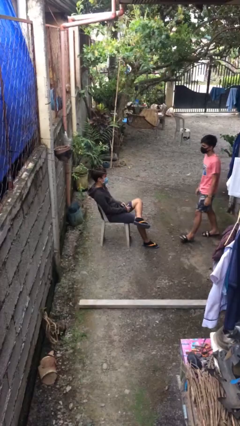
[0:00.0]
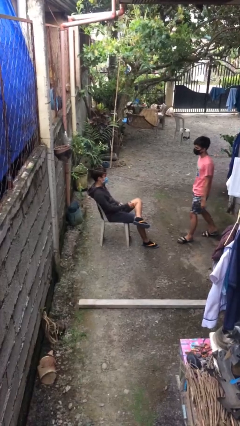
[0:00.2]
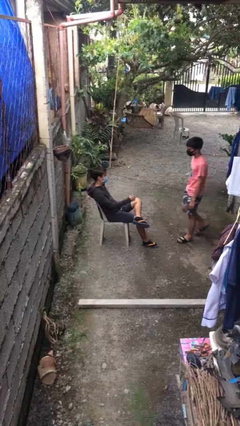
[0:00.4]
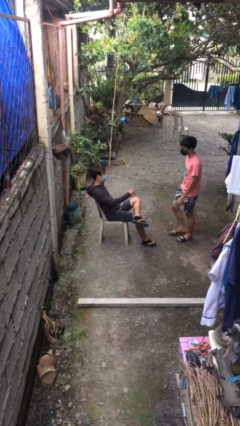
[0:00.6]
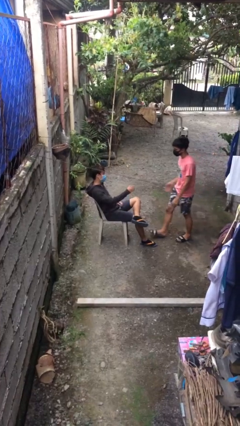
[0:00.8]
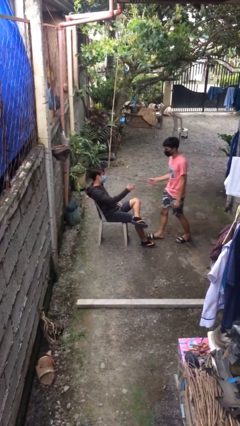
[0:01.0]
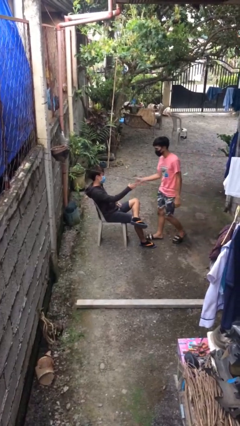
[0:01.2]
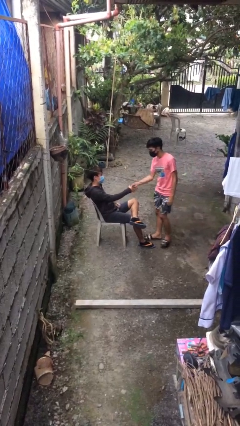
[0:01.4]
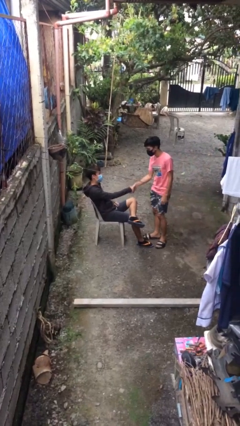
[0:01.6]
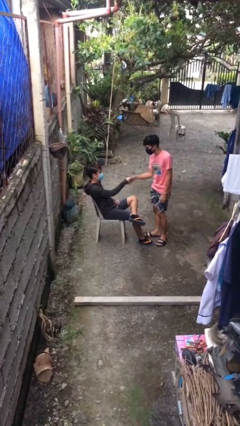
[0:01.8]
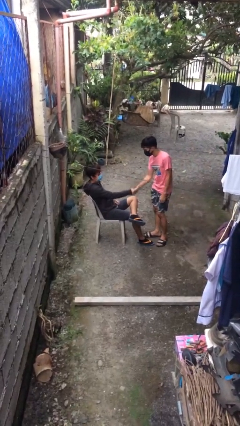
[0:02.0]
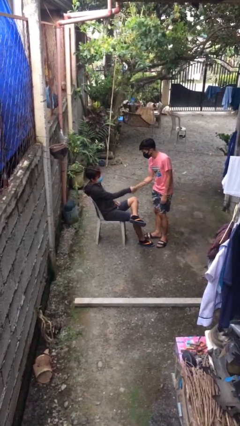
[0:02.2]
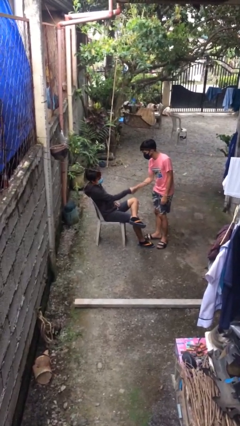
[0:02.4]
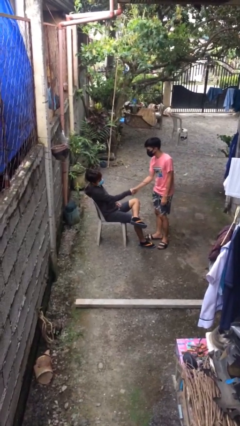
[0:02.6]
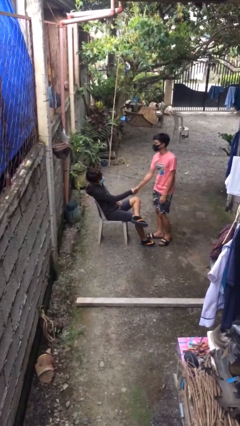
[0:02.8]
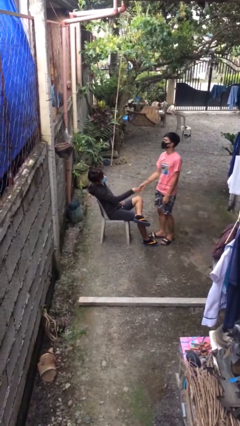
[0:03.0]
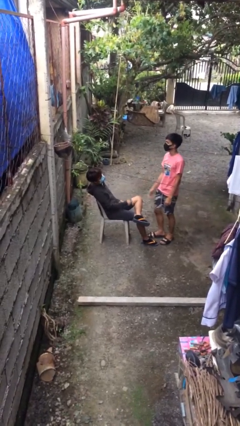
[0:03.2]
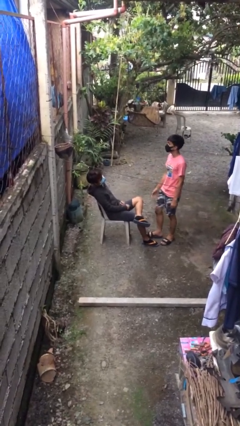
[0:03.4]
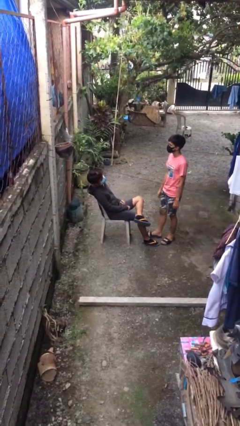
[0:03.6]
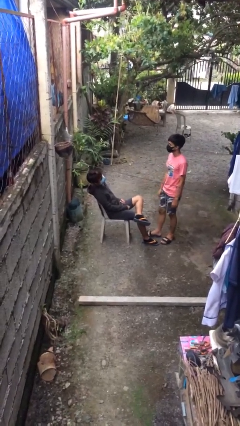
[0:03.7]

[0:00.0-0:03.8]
person shakes hand

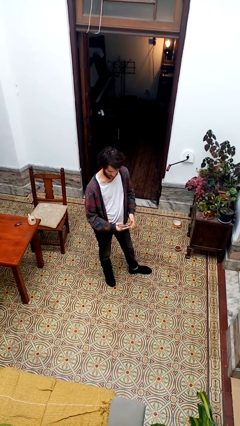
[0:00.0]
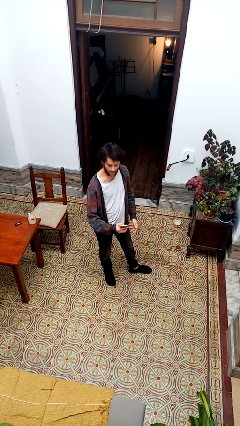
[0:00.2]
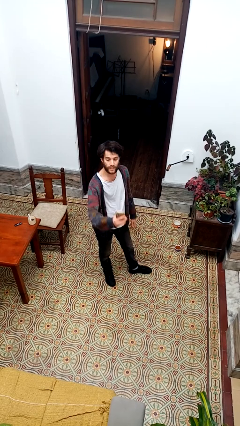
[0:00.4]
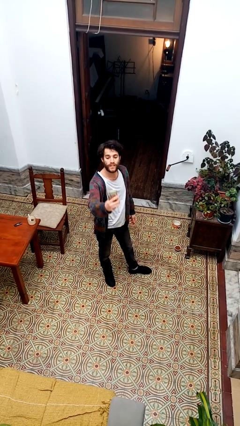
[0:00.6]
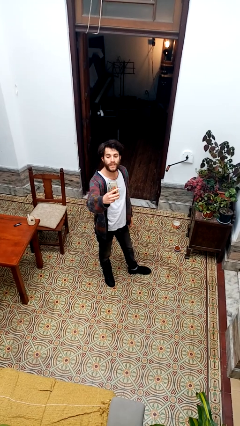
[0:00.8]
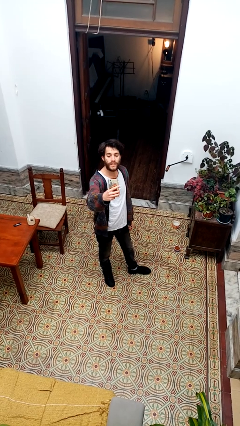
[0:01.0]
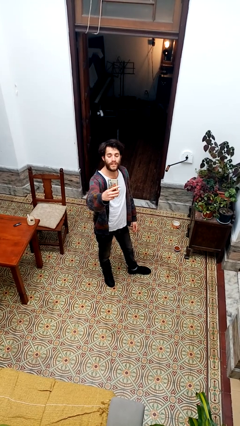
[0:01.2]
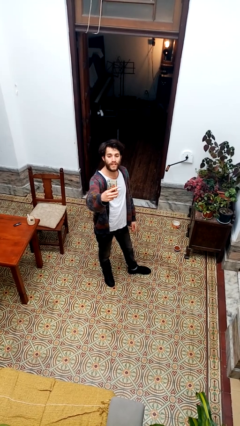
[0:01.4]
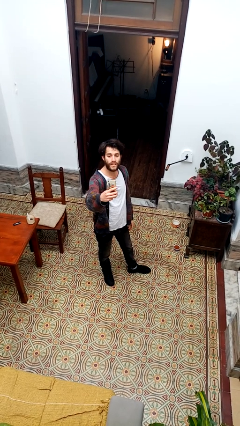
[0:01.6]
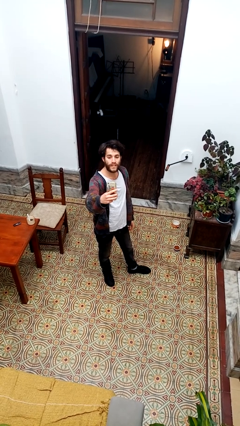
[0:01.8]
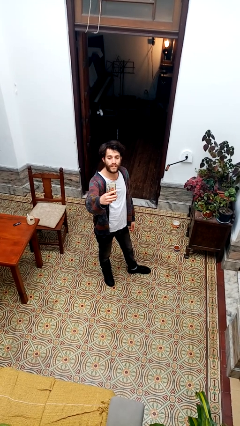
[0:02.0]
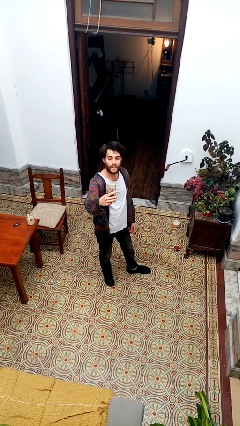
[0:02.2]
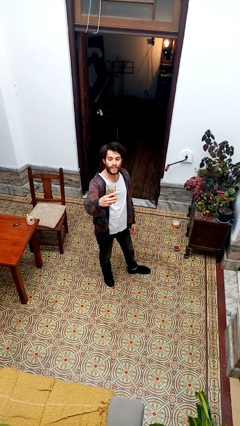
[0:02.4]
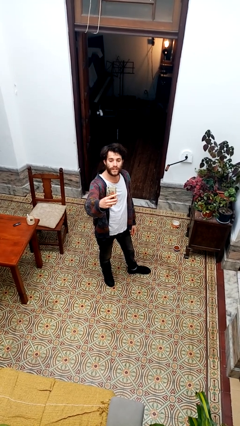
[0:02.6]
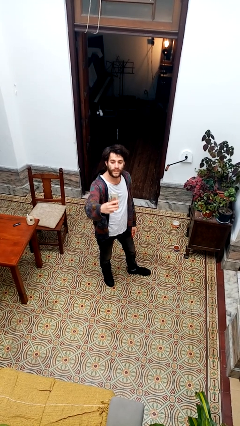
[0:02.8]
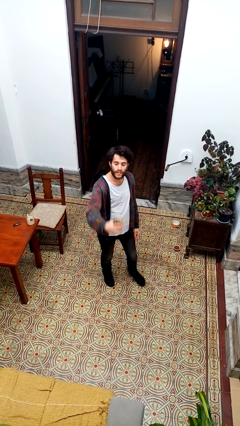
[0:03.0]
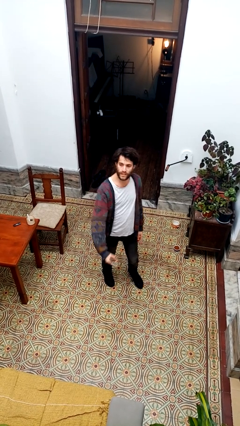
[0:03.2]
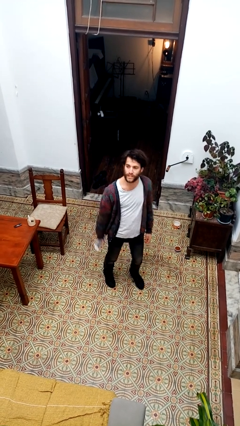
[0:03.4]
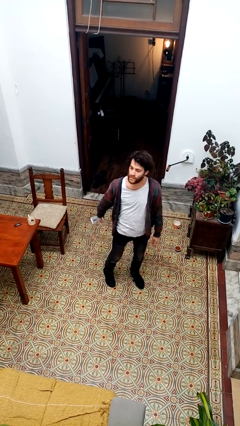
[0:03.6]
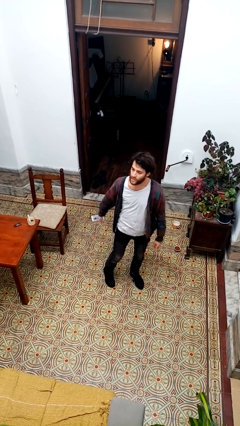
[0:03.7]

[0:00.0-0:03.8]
person takes selfie

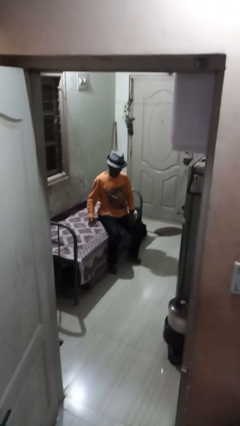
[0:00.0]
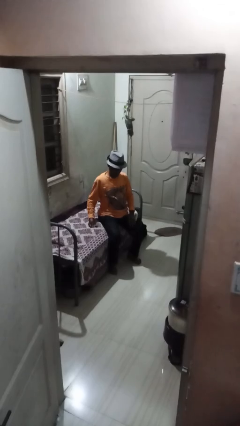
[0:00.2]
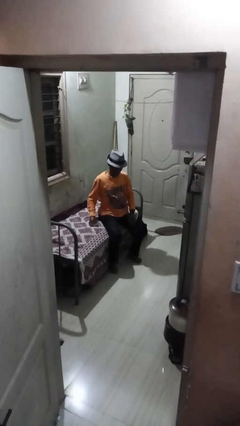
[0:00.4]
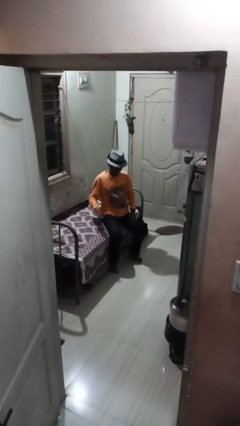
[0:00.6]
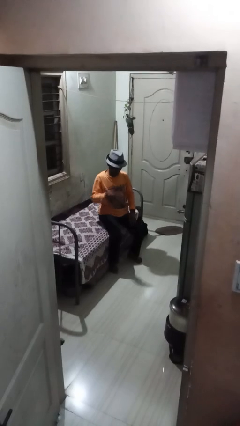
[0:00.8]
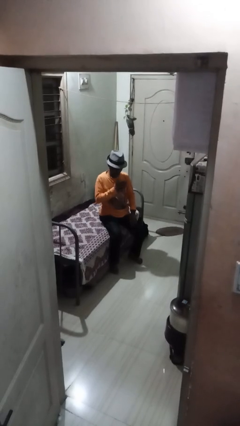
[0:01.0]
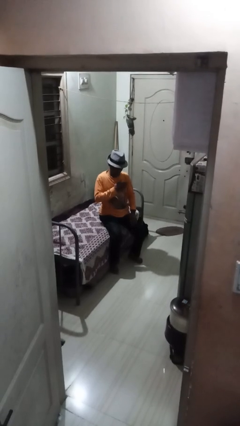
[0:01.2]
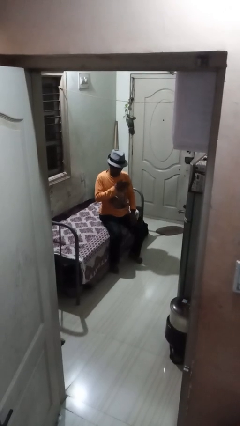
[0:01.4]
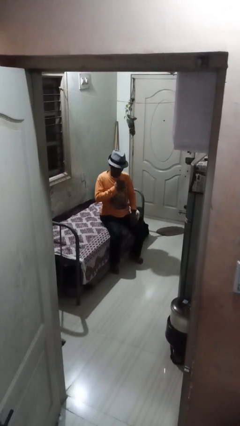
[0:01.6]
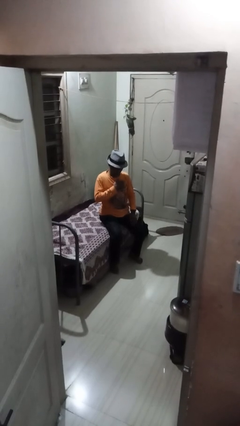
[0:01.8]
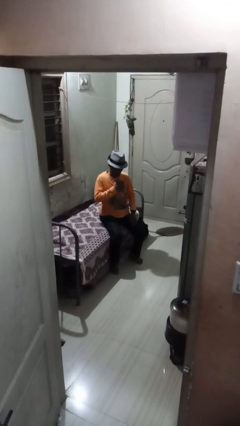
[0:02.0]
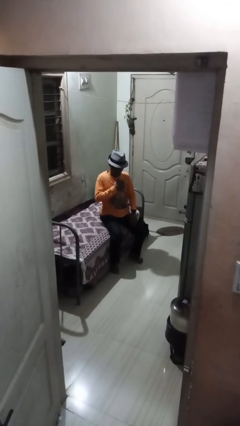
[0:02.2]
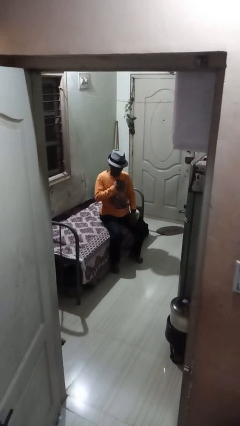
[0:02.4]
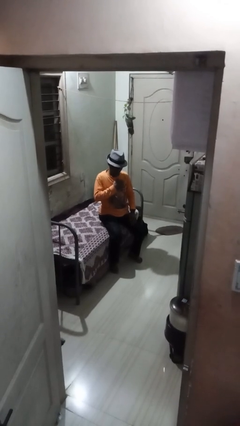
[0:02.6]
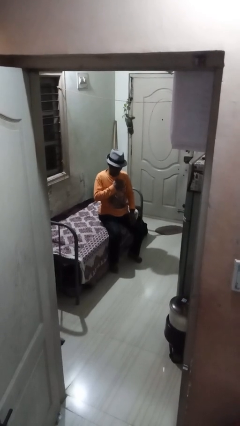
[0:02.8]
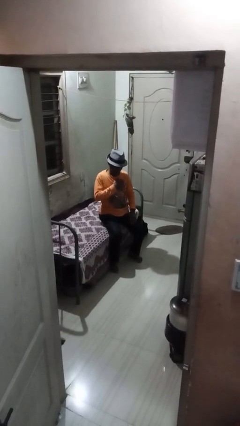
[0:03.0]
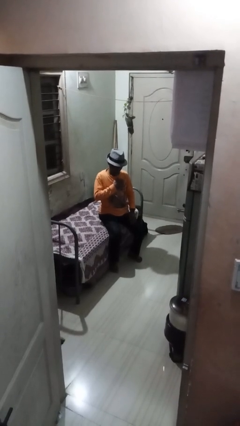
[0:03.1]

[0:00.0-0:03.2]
person drums on chest

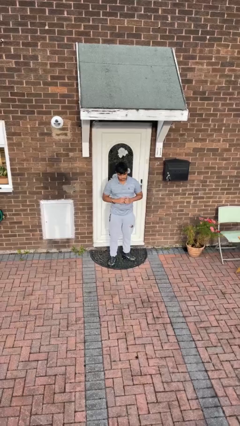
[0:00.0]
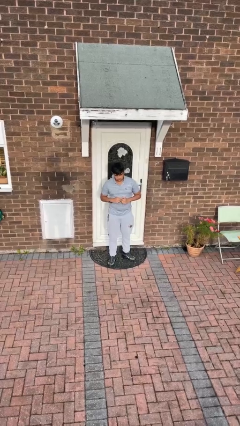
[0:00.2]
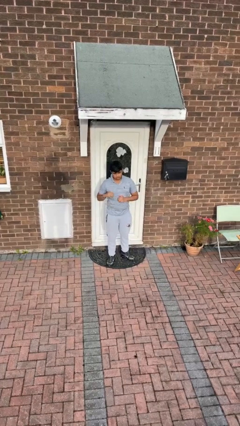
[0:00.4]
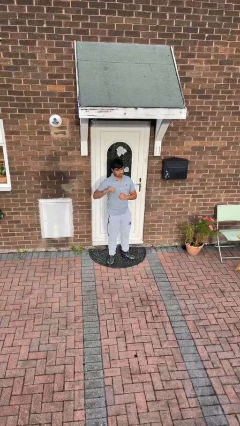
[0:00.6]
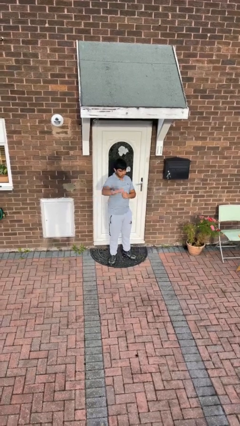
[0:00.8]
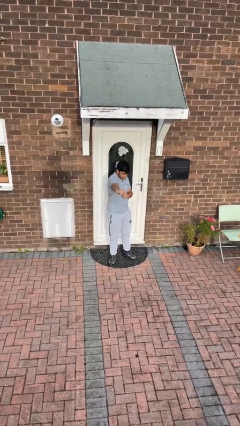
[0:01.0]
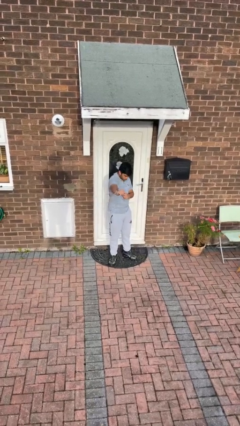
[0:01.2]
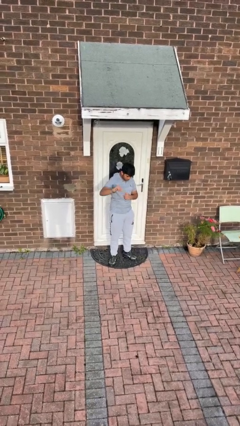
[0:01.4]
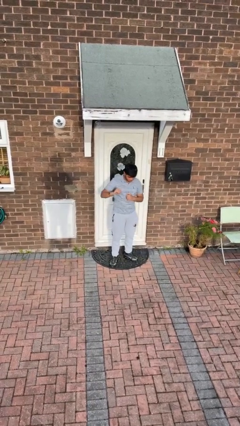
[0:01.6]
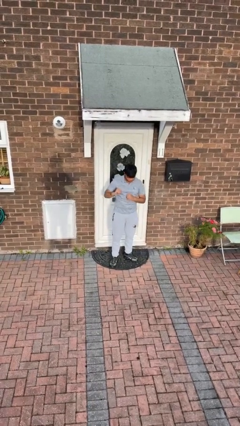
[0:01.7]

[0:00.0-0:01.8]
person punches

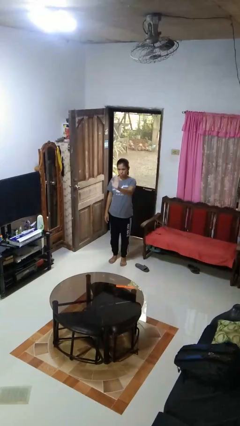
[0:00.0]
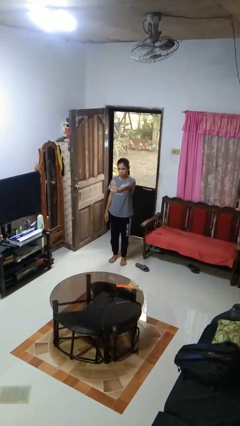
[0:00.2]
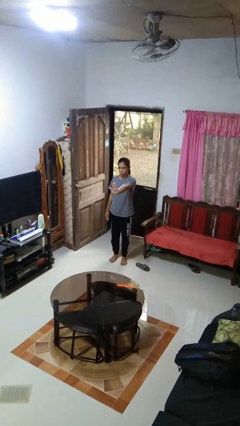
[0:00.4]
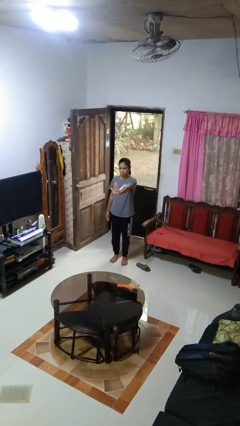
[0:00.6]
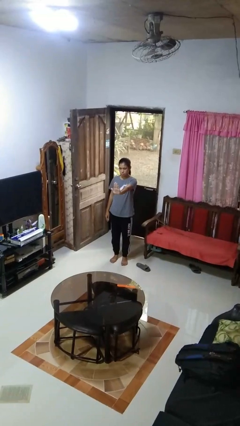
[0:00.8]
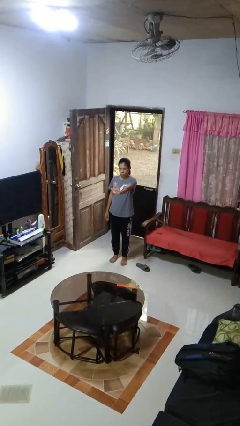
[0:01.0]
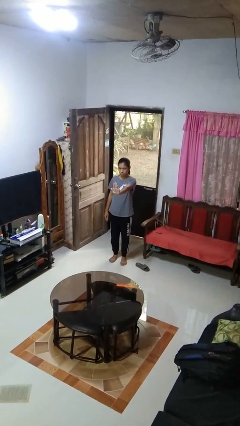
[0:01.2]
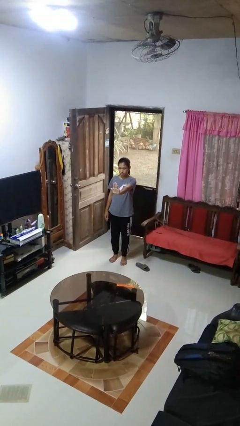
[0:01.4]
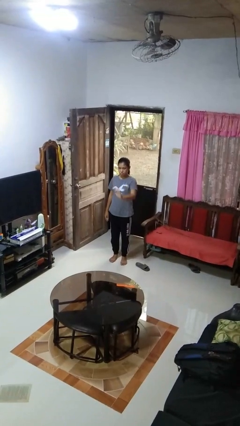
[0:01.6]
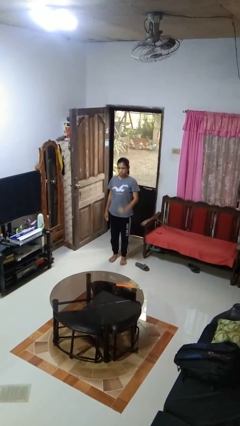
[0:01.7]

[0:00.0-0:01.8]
person gestures stop

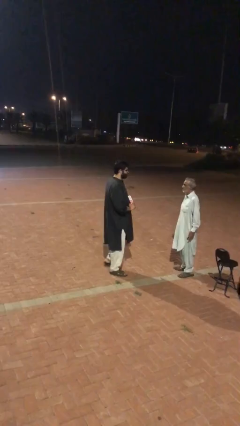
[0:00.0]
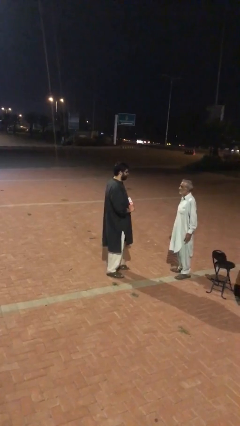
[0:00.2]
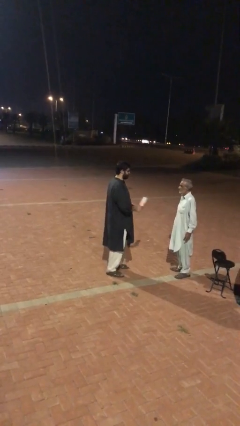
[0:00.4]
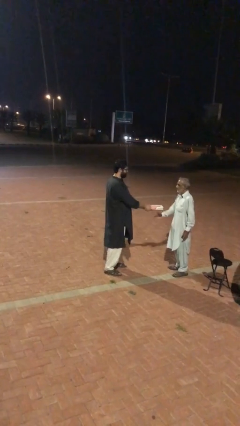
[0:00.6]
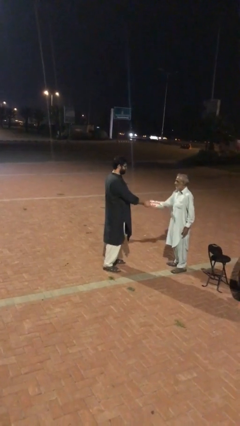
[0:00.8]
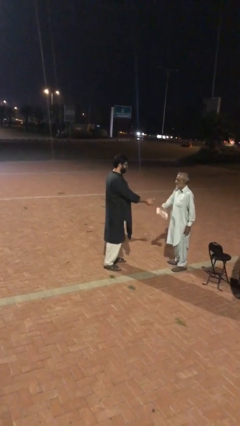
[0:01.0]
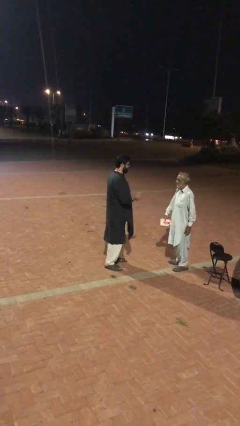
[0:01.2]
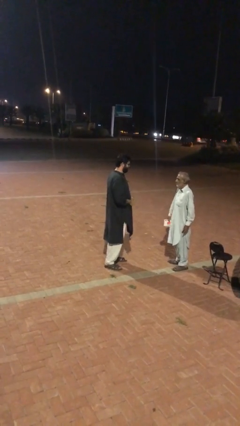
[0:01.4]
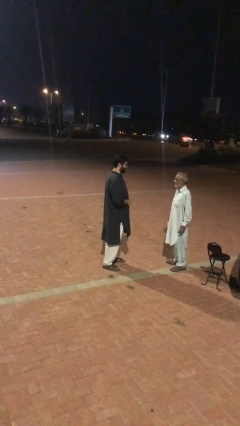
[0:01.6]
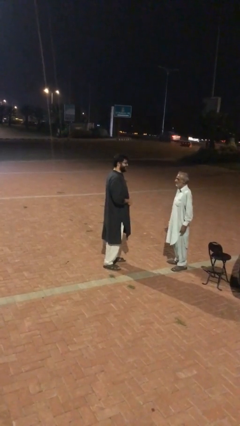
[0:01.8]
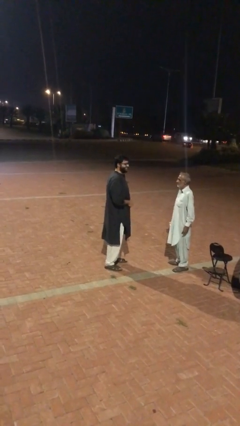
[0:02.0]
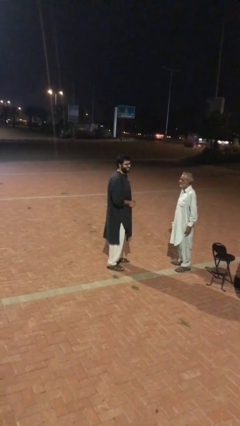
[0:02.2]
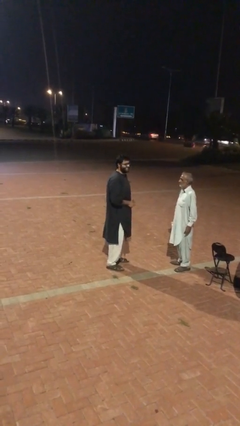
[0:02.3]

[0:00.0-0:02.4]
person transfers object to person
